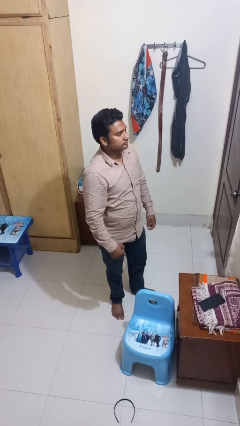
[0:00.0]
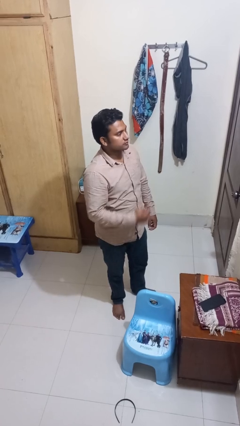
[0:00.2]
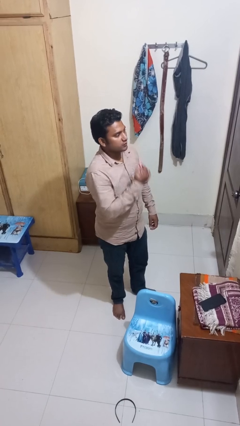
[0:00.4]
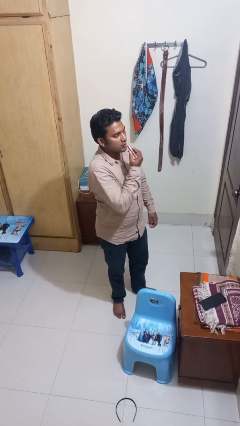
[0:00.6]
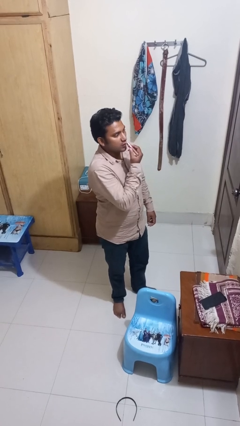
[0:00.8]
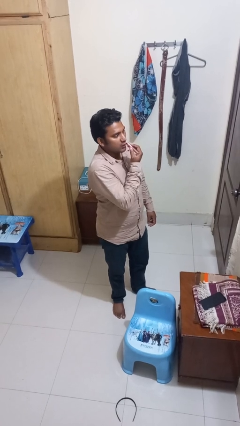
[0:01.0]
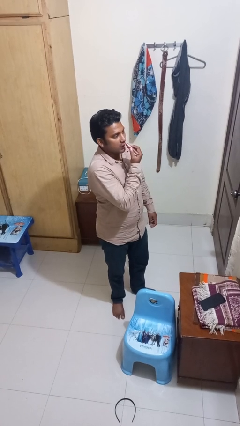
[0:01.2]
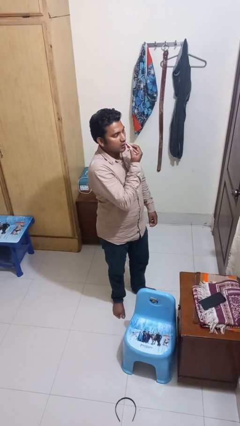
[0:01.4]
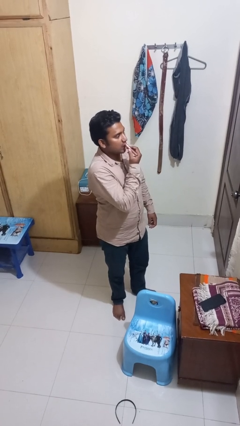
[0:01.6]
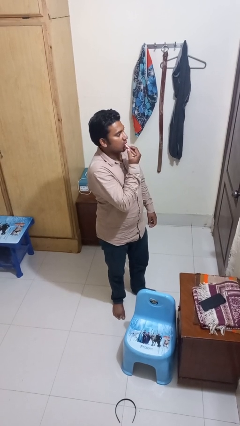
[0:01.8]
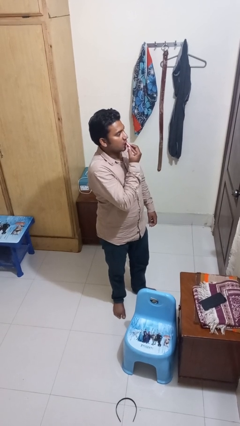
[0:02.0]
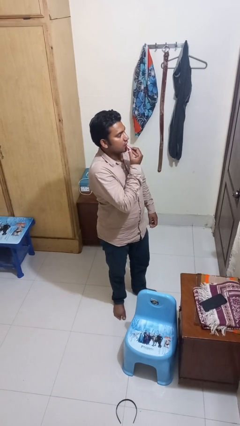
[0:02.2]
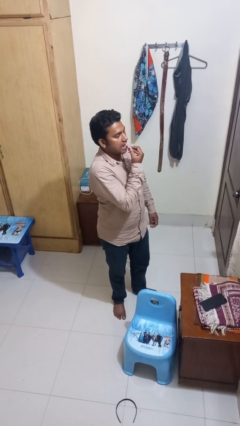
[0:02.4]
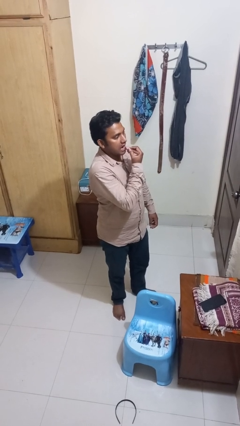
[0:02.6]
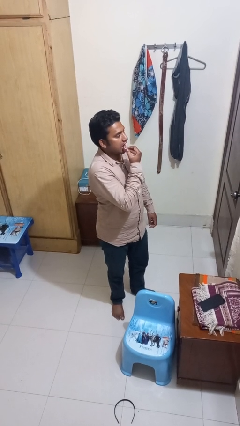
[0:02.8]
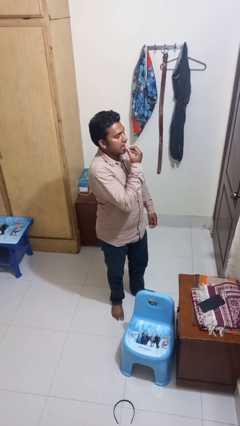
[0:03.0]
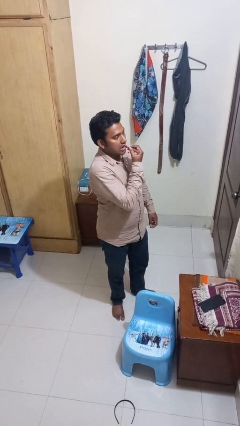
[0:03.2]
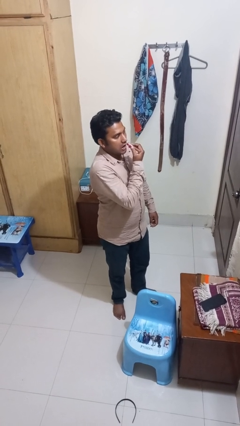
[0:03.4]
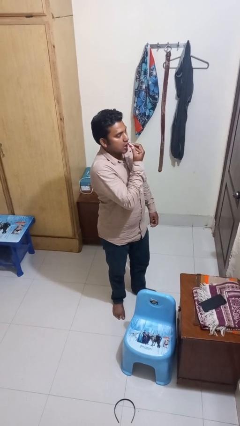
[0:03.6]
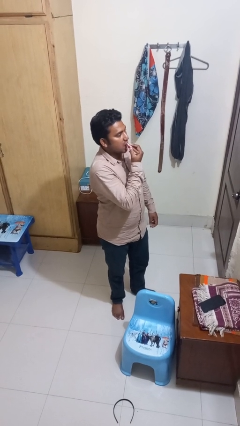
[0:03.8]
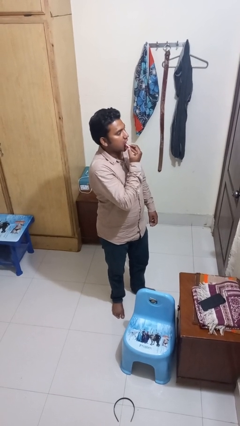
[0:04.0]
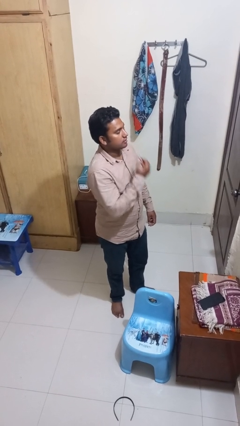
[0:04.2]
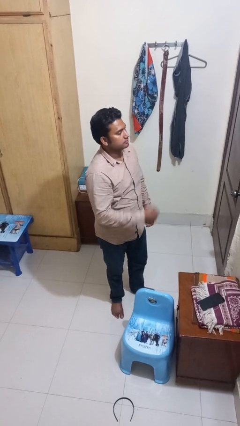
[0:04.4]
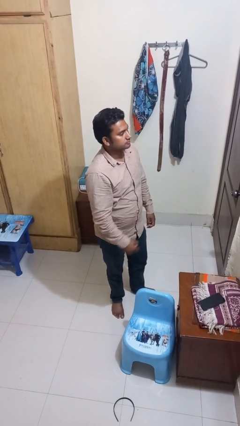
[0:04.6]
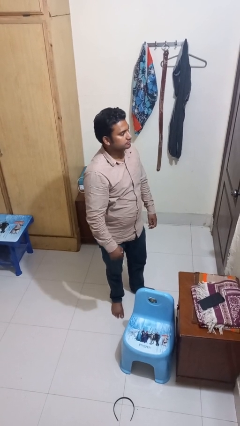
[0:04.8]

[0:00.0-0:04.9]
person applies lip makeup

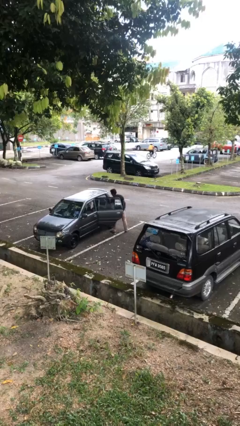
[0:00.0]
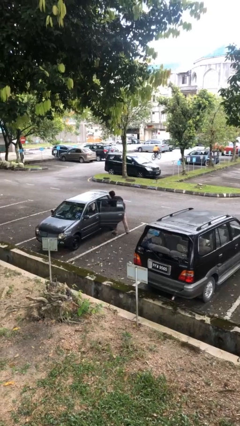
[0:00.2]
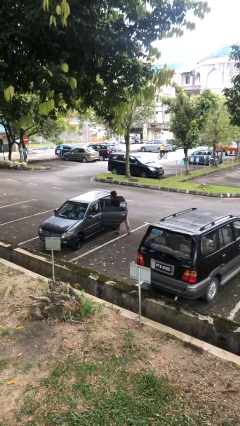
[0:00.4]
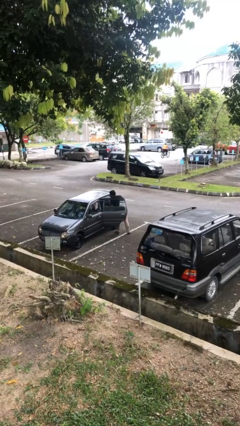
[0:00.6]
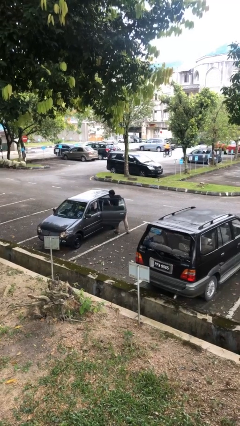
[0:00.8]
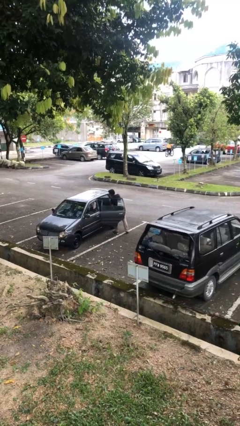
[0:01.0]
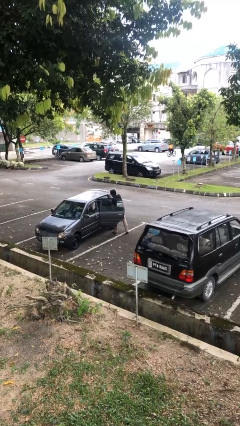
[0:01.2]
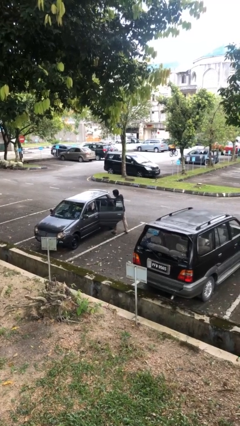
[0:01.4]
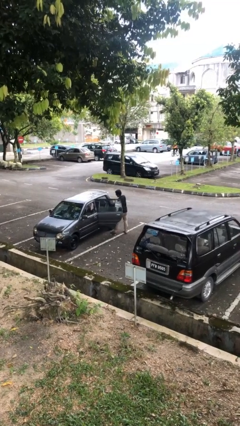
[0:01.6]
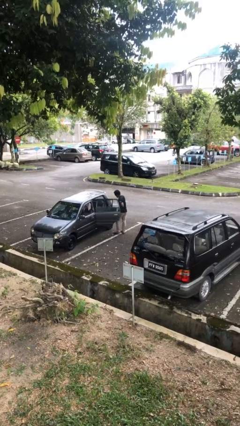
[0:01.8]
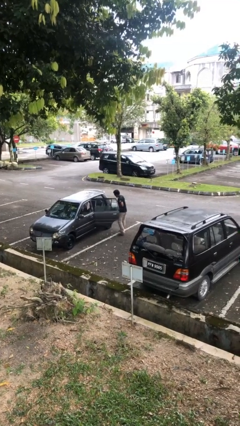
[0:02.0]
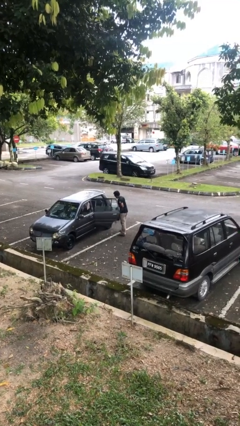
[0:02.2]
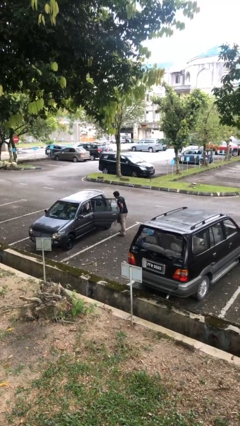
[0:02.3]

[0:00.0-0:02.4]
person unloads car

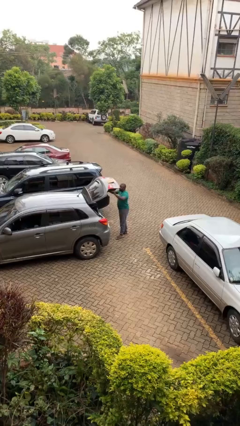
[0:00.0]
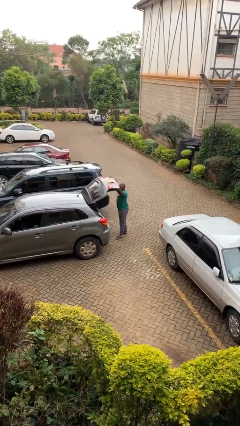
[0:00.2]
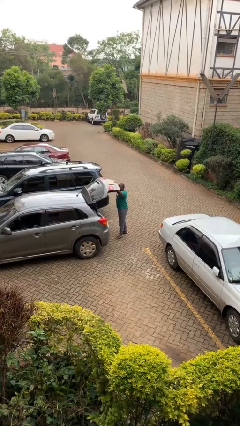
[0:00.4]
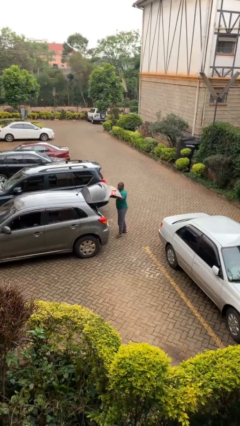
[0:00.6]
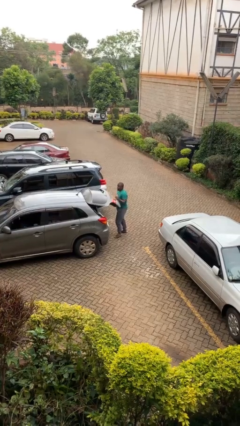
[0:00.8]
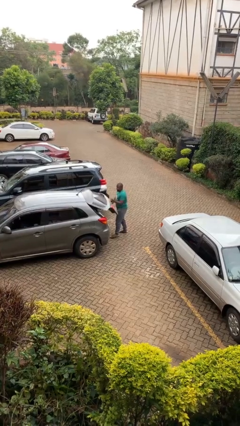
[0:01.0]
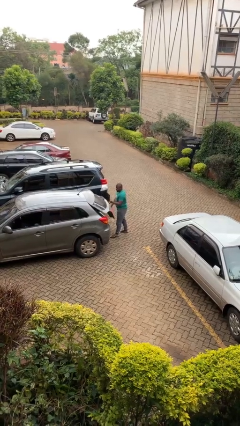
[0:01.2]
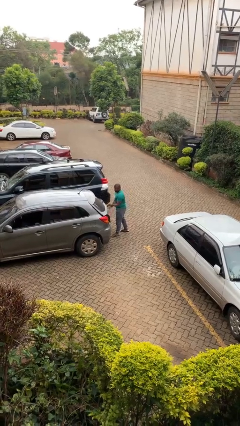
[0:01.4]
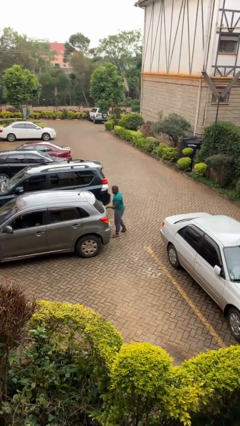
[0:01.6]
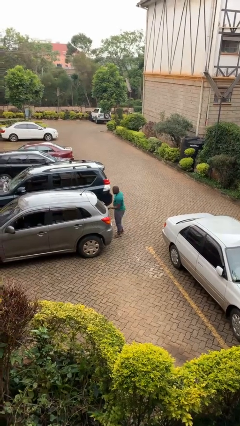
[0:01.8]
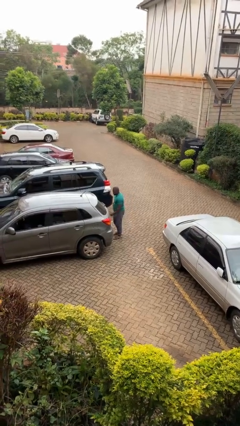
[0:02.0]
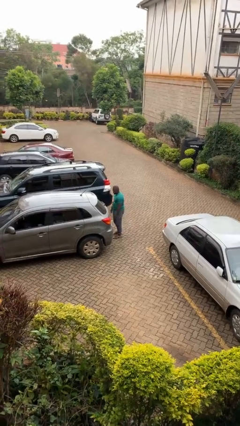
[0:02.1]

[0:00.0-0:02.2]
person closes car trunk

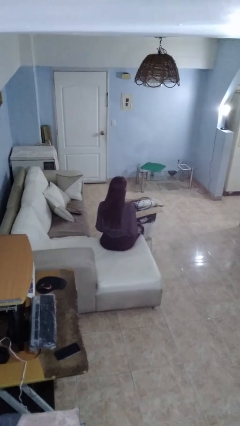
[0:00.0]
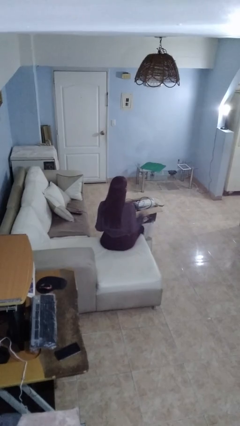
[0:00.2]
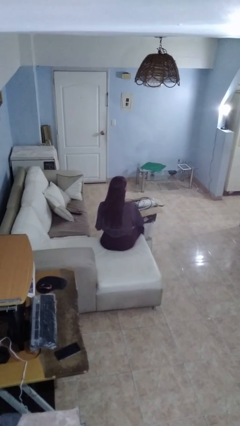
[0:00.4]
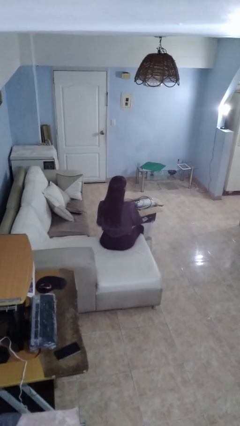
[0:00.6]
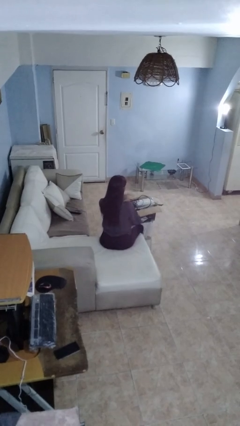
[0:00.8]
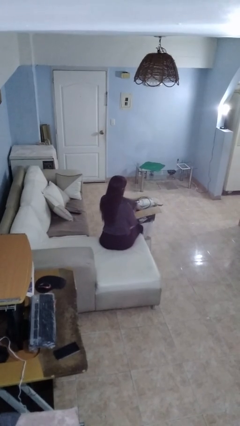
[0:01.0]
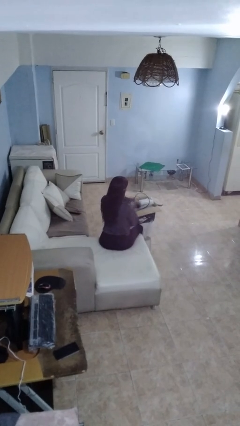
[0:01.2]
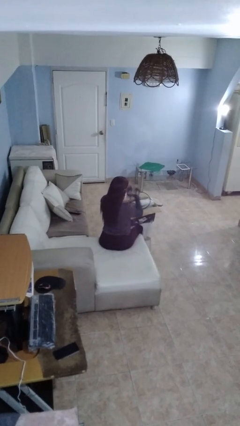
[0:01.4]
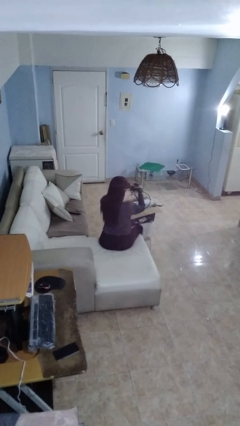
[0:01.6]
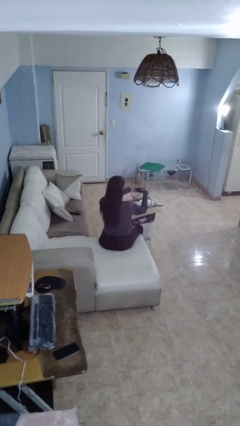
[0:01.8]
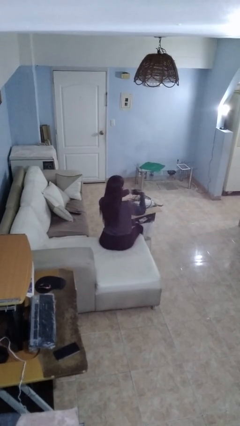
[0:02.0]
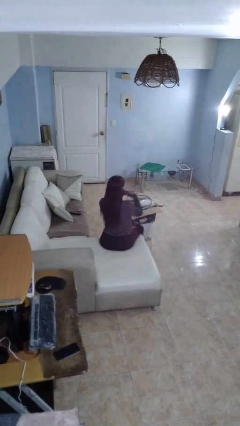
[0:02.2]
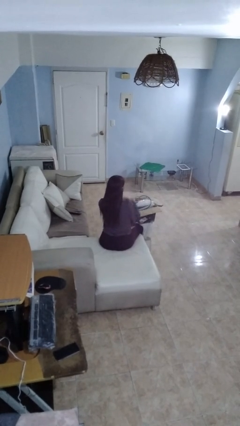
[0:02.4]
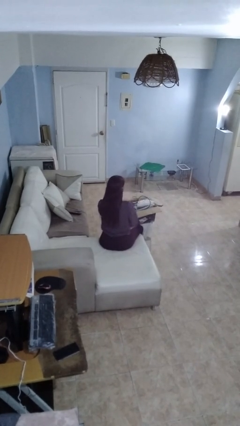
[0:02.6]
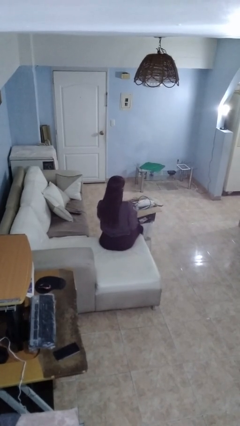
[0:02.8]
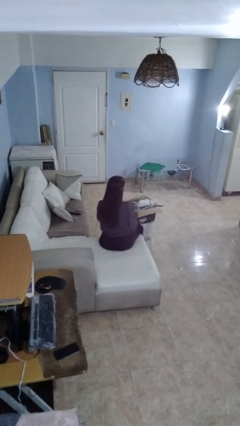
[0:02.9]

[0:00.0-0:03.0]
person searches in box

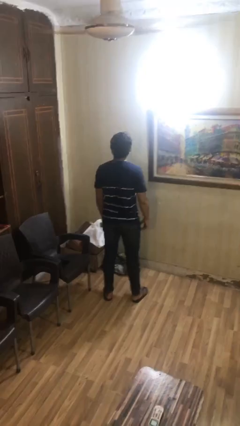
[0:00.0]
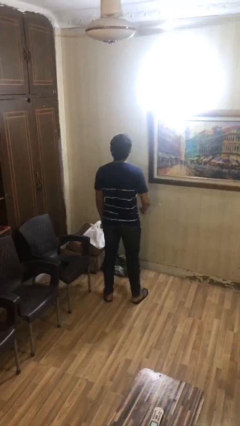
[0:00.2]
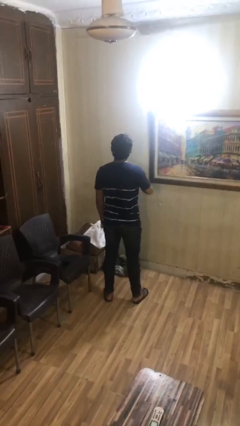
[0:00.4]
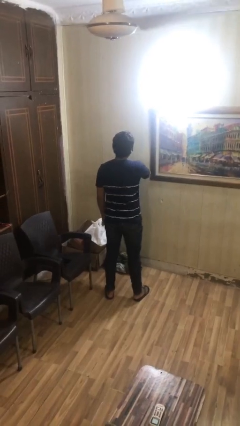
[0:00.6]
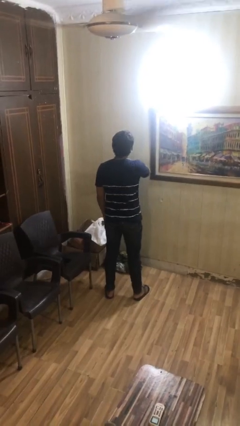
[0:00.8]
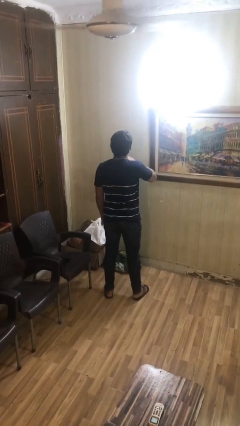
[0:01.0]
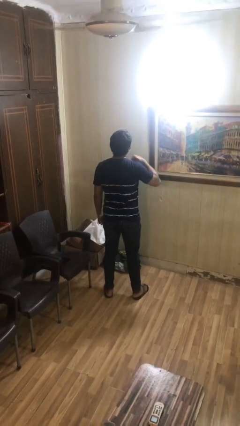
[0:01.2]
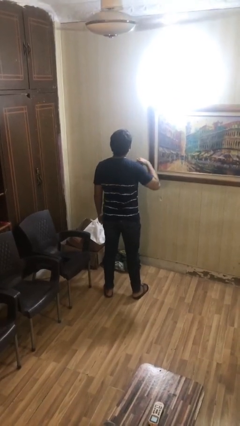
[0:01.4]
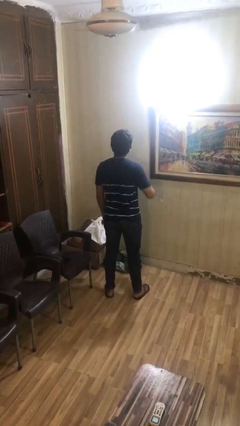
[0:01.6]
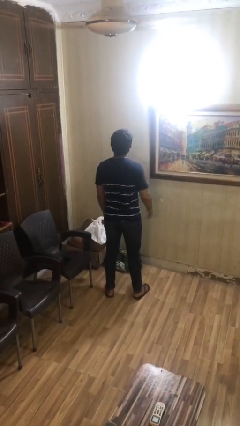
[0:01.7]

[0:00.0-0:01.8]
person gestures cut

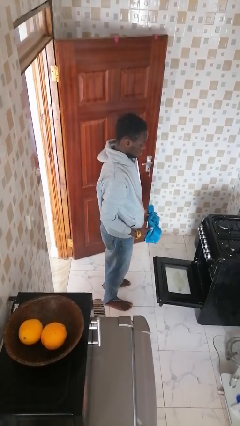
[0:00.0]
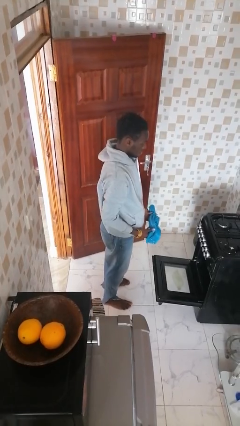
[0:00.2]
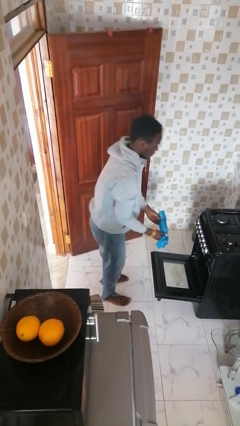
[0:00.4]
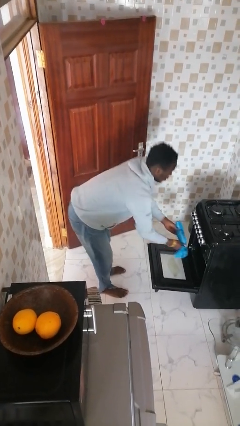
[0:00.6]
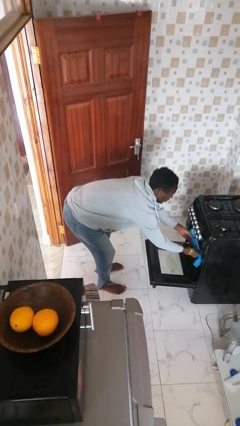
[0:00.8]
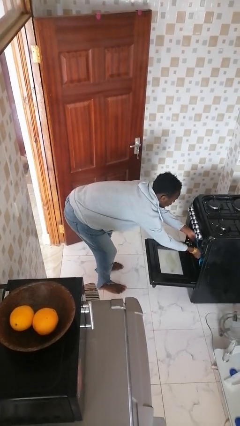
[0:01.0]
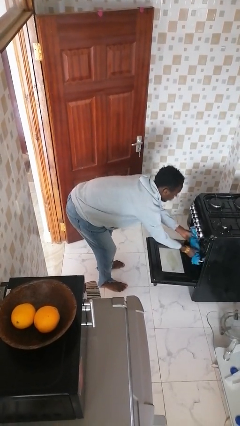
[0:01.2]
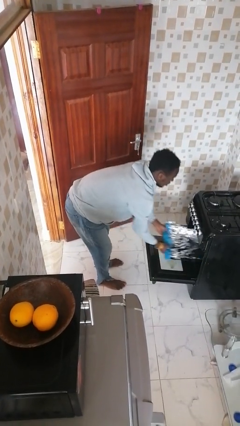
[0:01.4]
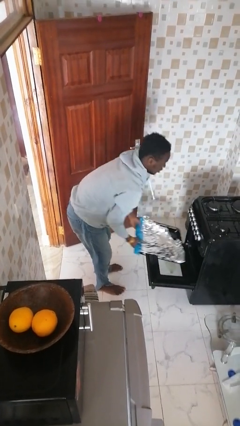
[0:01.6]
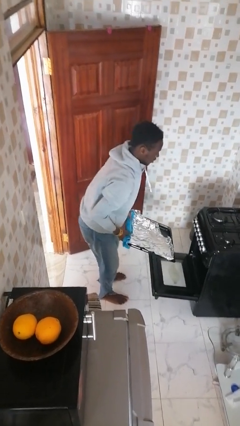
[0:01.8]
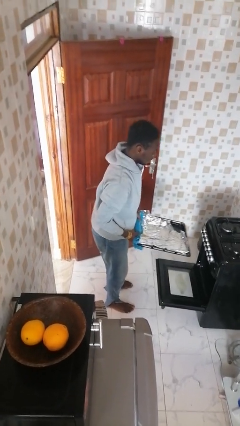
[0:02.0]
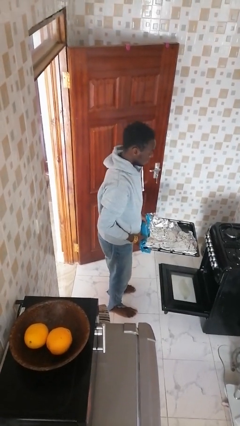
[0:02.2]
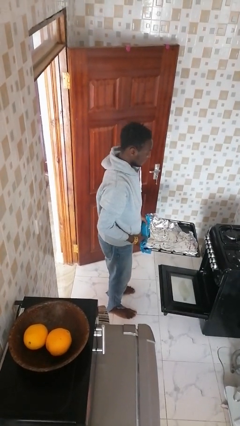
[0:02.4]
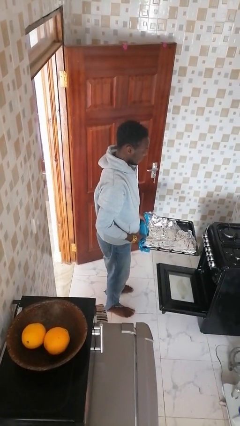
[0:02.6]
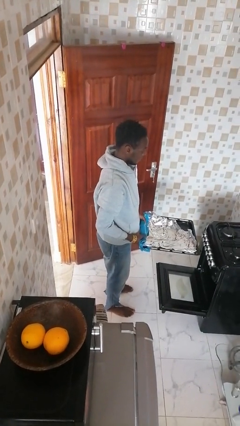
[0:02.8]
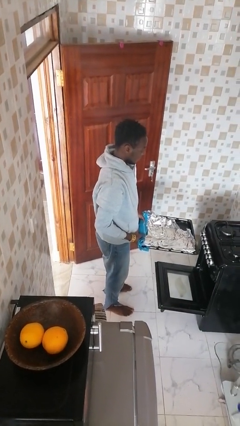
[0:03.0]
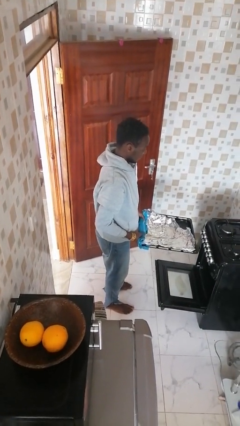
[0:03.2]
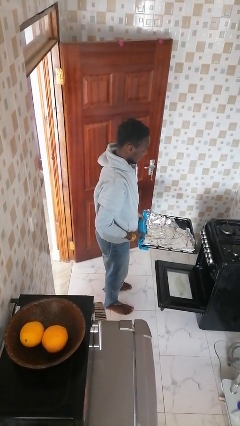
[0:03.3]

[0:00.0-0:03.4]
person takes object from oven
